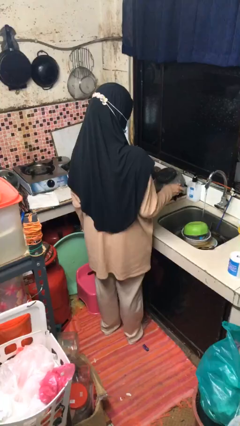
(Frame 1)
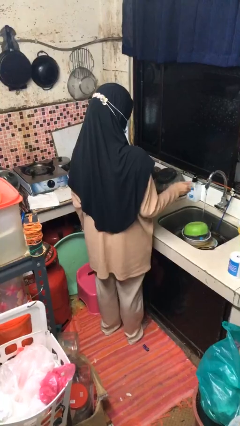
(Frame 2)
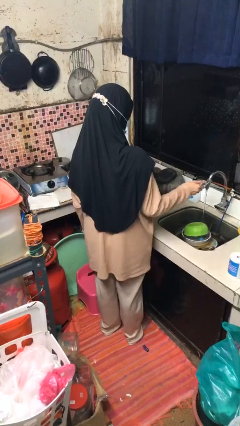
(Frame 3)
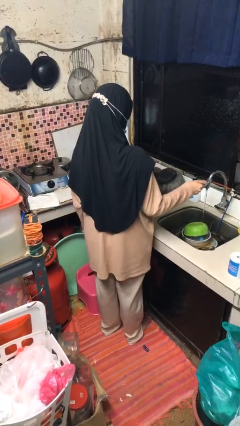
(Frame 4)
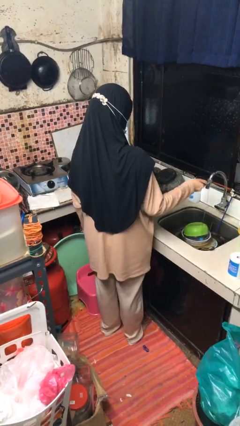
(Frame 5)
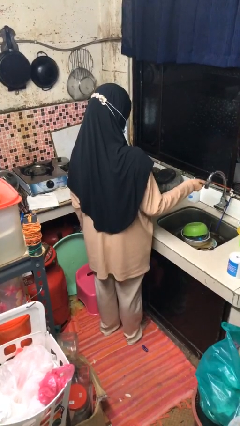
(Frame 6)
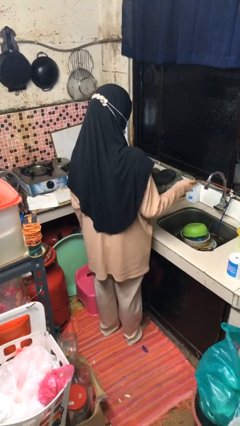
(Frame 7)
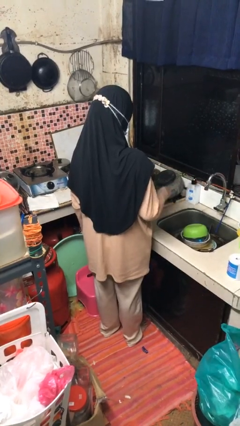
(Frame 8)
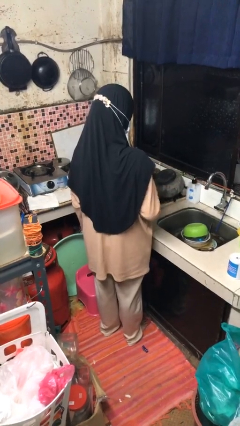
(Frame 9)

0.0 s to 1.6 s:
person turns off faucet

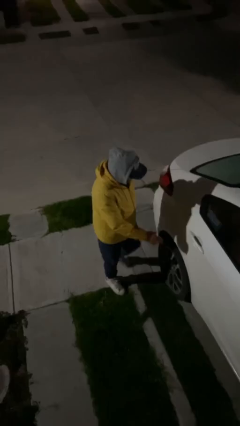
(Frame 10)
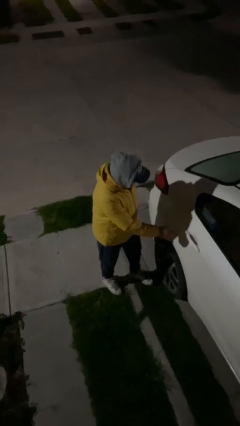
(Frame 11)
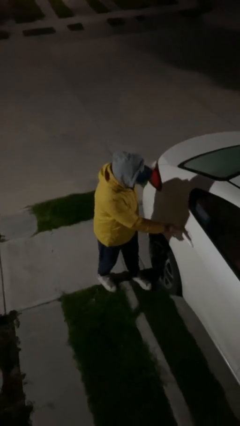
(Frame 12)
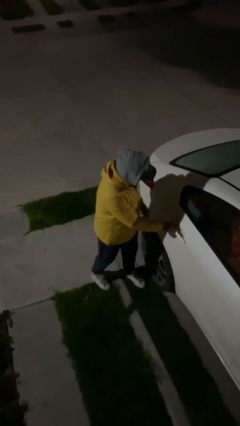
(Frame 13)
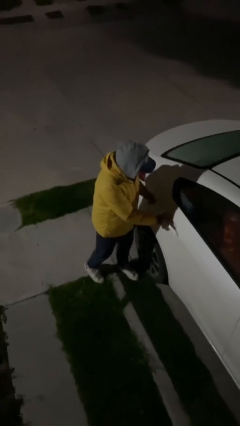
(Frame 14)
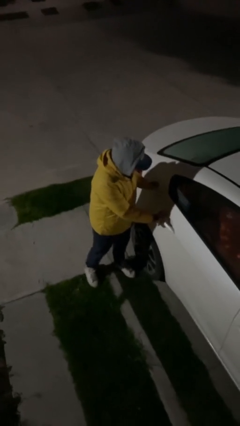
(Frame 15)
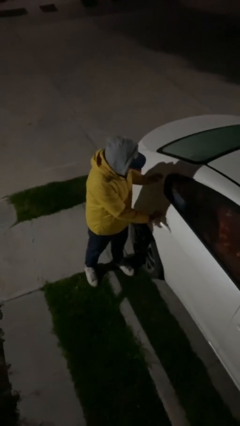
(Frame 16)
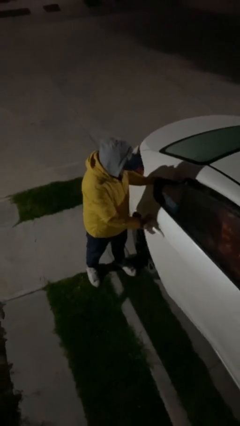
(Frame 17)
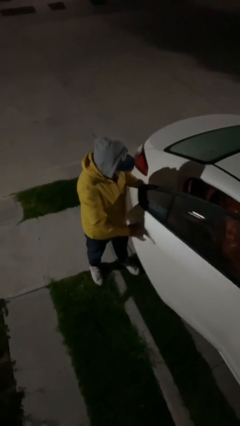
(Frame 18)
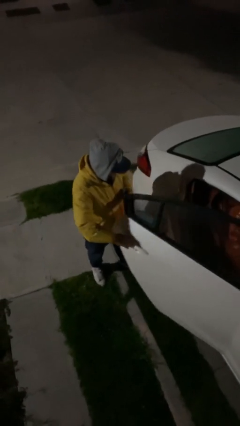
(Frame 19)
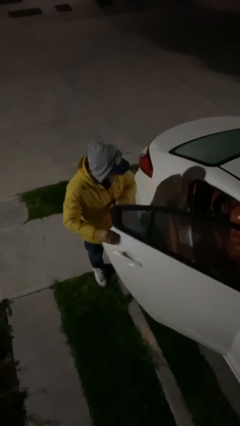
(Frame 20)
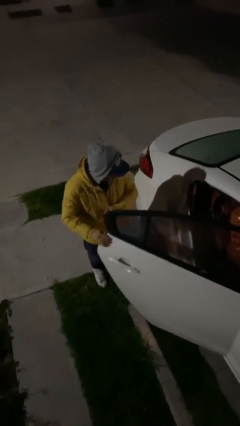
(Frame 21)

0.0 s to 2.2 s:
person opens car door

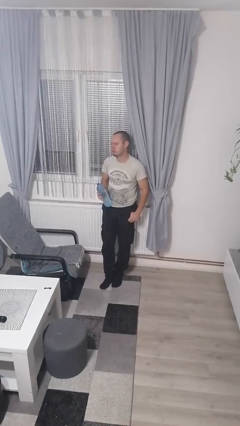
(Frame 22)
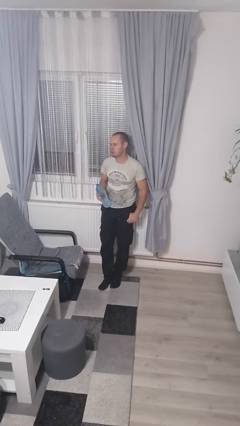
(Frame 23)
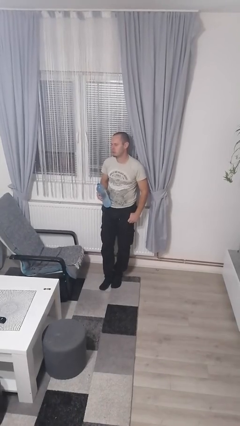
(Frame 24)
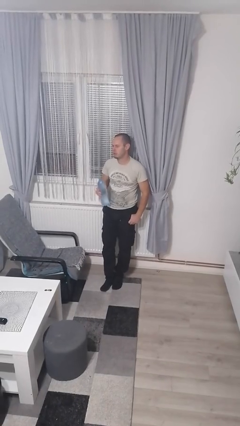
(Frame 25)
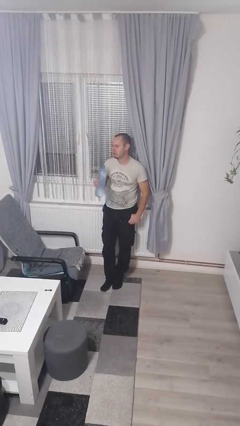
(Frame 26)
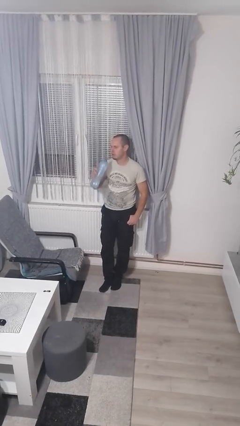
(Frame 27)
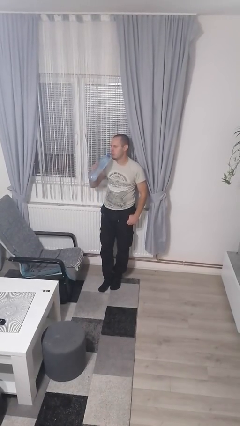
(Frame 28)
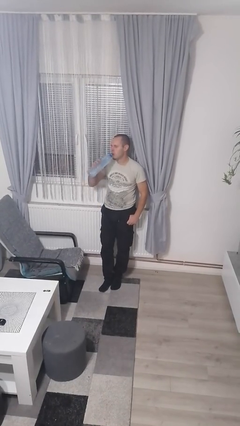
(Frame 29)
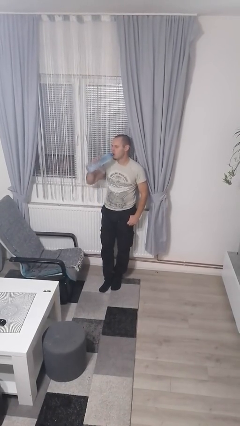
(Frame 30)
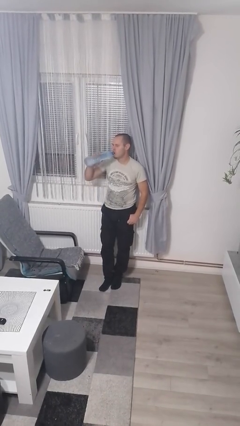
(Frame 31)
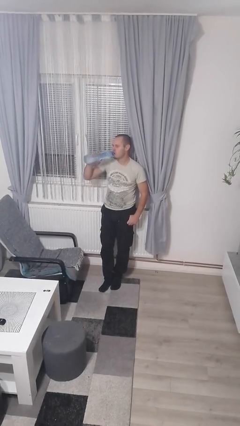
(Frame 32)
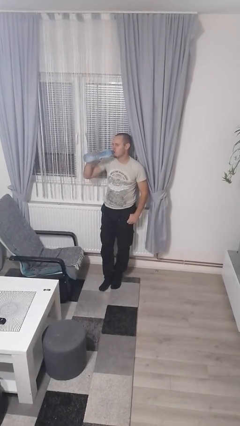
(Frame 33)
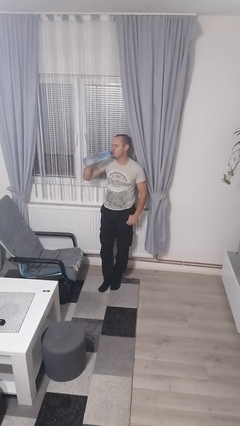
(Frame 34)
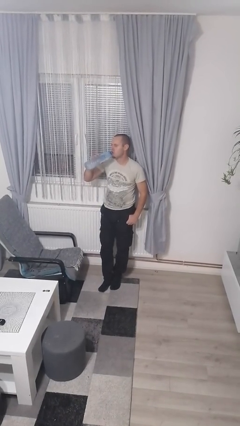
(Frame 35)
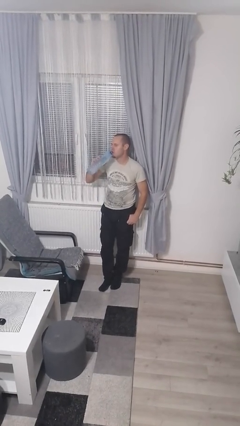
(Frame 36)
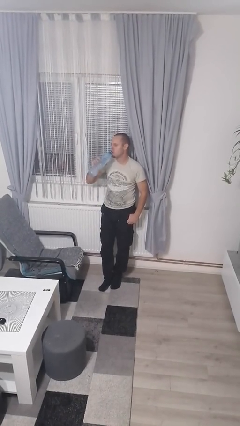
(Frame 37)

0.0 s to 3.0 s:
person drinks from bottle

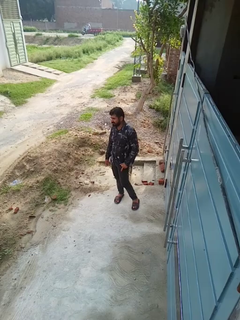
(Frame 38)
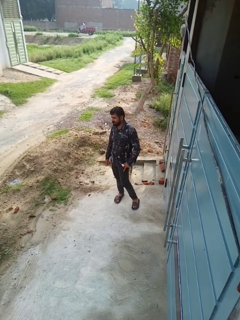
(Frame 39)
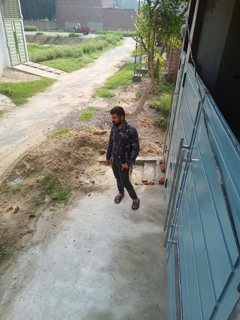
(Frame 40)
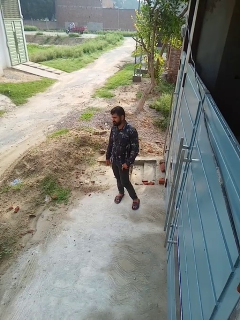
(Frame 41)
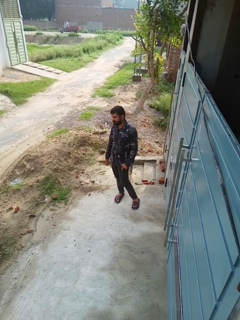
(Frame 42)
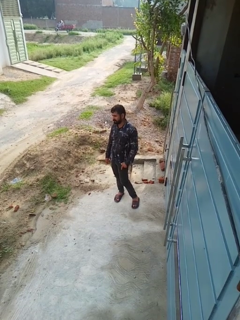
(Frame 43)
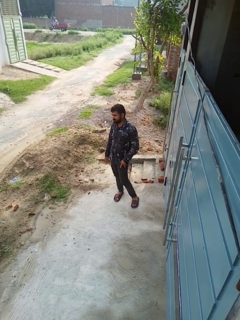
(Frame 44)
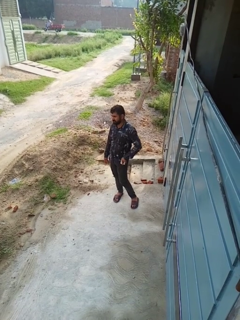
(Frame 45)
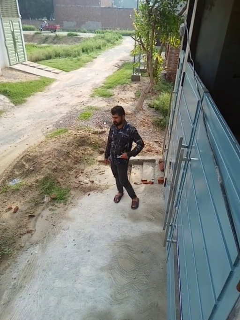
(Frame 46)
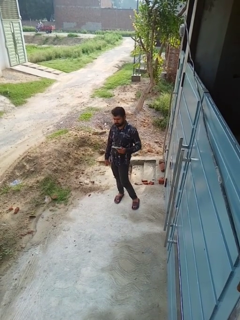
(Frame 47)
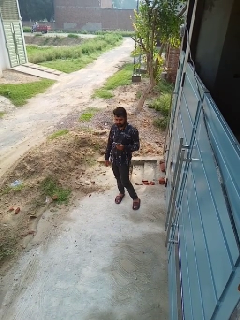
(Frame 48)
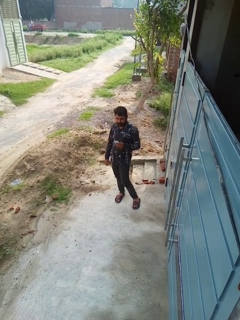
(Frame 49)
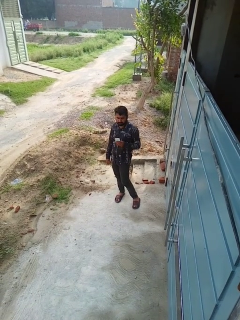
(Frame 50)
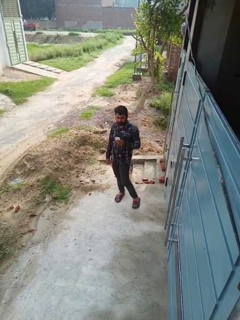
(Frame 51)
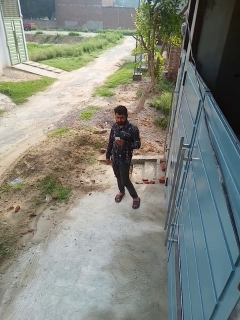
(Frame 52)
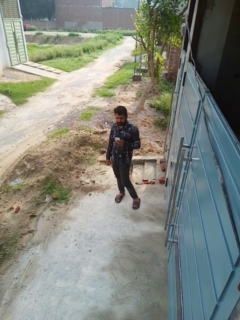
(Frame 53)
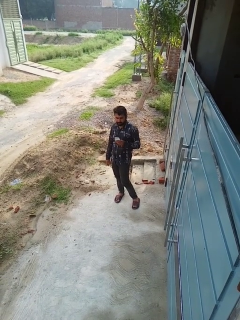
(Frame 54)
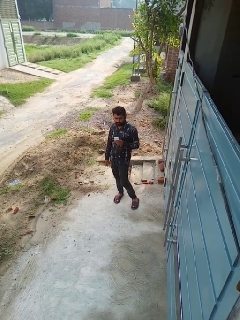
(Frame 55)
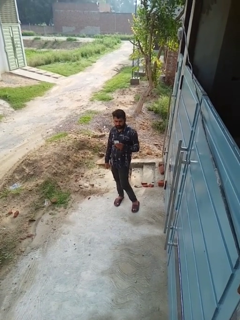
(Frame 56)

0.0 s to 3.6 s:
person takes phone from pocket

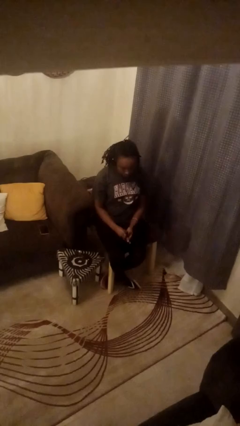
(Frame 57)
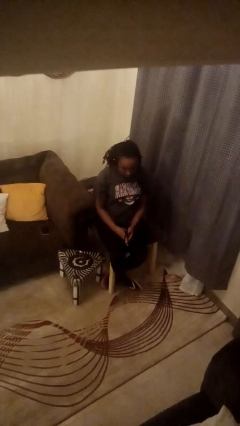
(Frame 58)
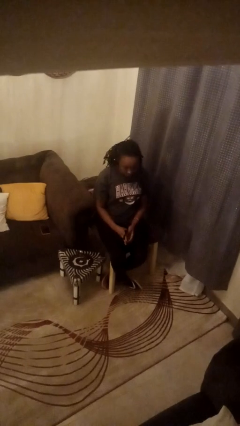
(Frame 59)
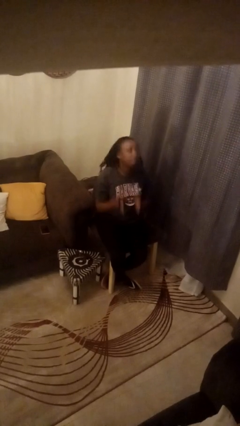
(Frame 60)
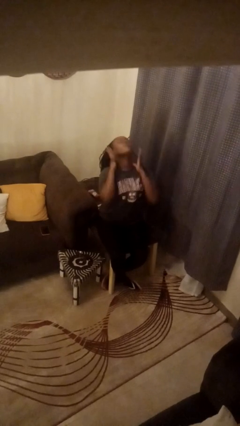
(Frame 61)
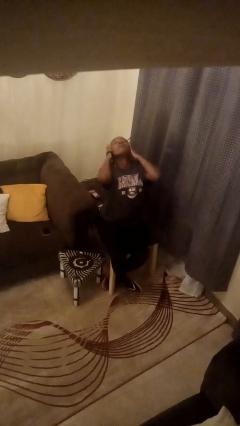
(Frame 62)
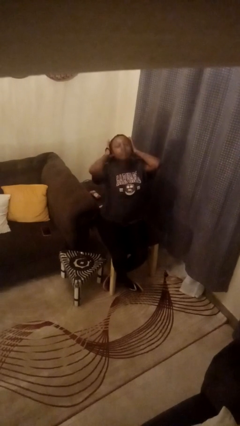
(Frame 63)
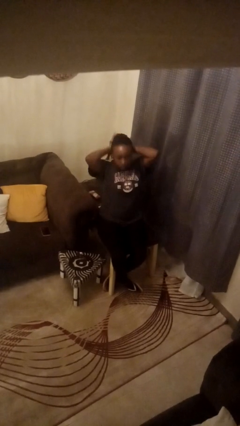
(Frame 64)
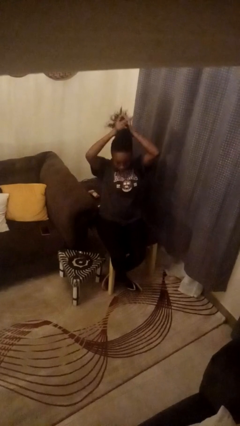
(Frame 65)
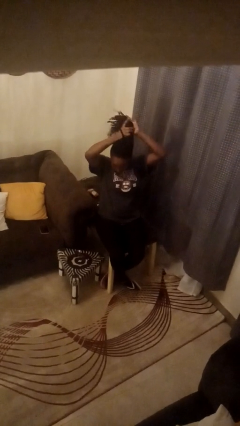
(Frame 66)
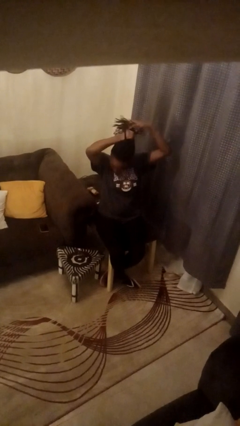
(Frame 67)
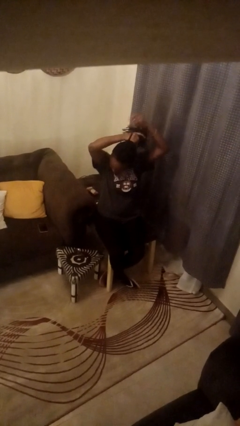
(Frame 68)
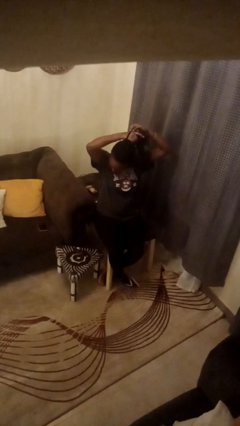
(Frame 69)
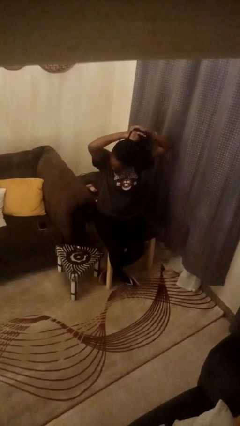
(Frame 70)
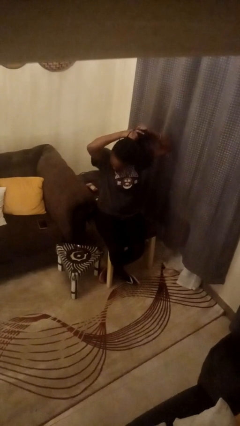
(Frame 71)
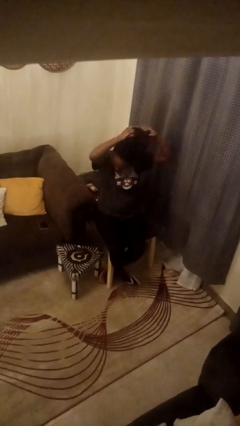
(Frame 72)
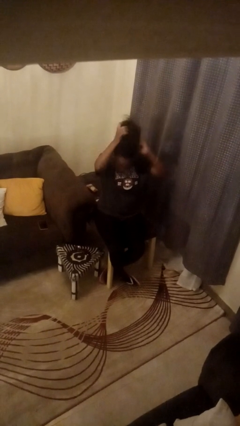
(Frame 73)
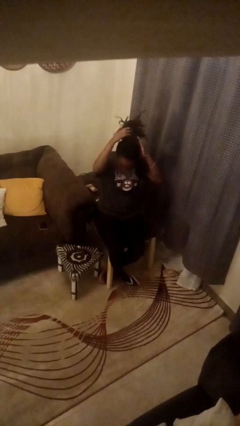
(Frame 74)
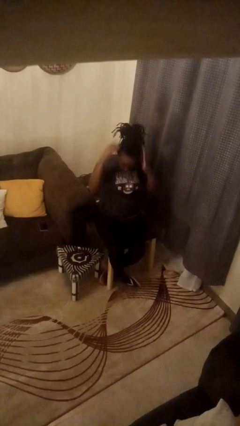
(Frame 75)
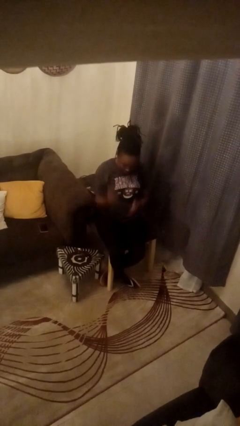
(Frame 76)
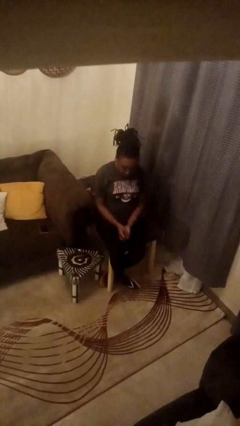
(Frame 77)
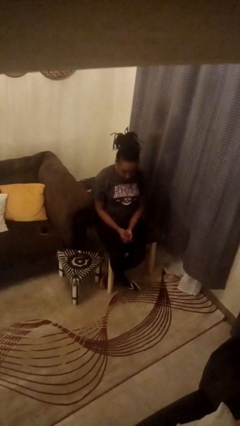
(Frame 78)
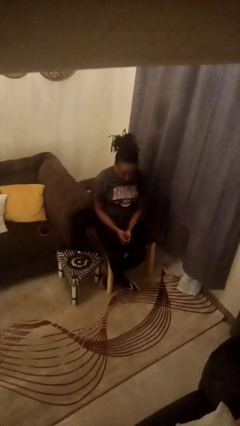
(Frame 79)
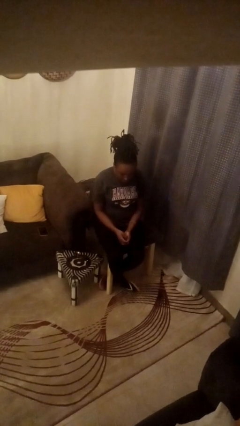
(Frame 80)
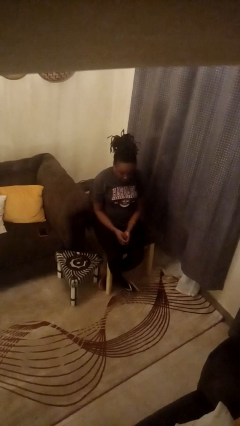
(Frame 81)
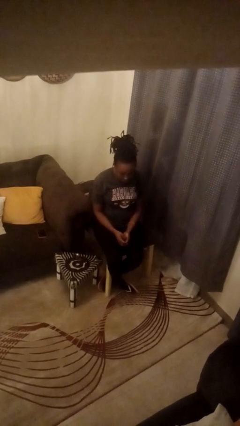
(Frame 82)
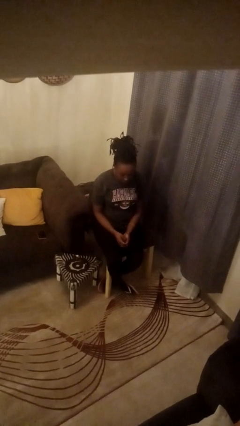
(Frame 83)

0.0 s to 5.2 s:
person puts hair in ponytail

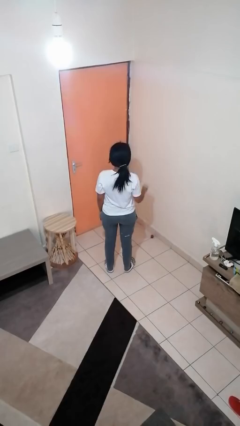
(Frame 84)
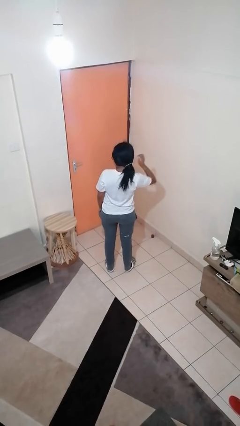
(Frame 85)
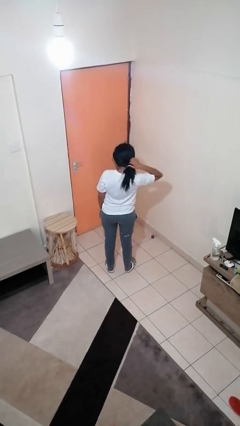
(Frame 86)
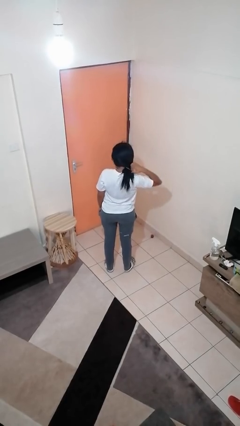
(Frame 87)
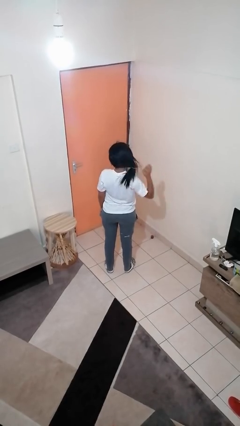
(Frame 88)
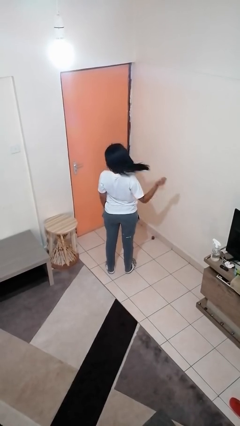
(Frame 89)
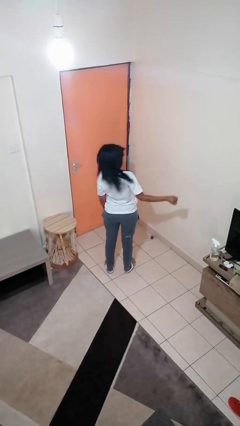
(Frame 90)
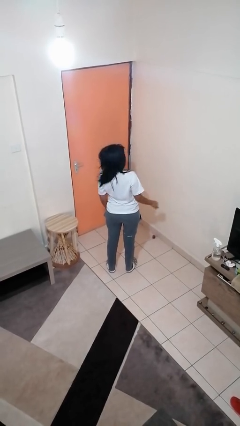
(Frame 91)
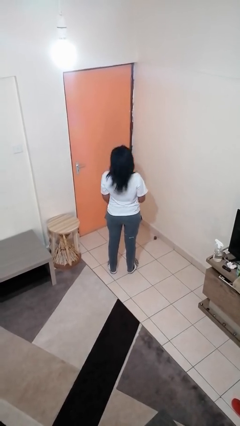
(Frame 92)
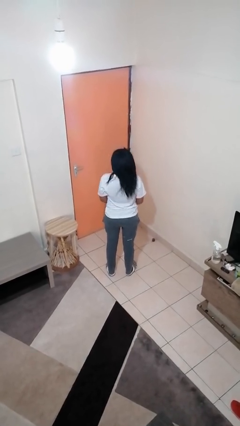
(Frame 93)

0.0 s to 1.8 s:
person takes off hairtie

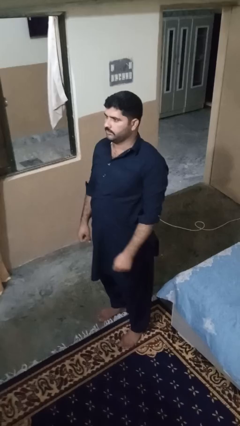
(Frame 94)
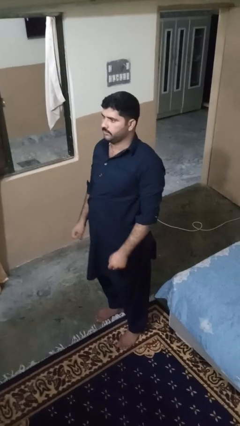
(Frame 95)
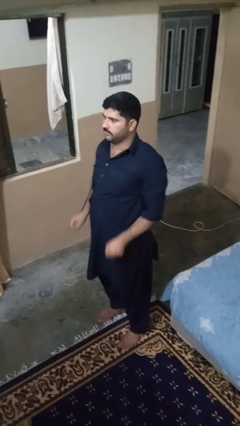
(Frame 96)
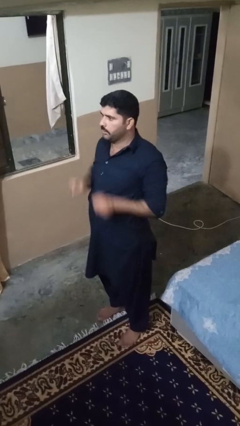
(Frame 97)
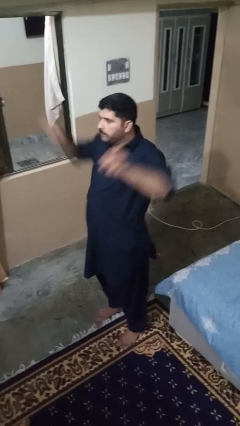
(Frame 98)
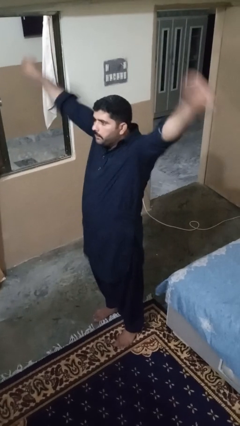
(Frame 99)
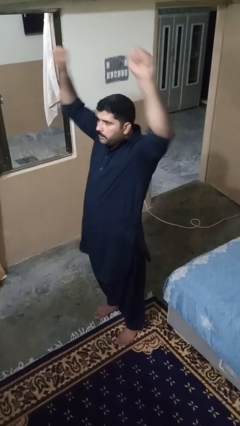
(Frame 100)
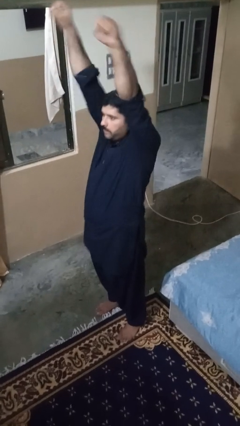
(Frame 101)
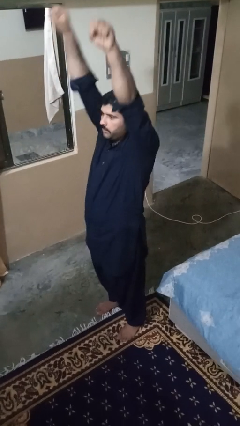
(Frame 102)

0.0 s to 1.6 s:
person punches
